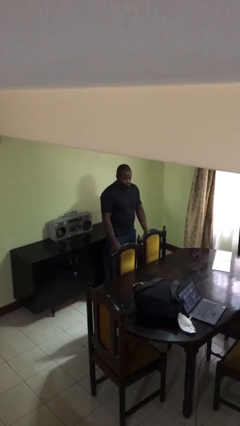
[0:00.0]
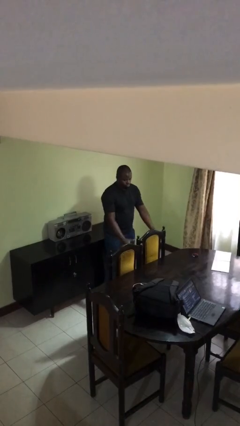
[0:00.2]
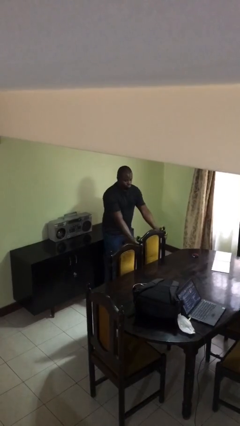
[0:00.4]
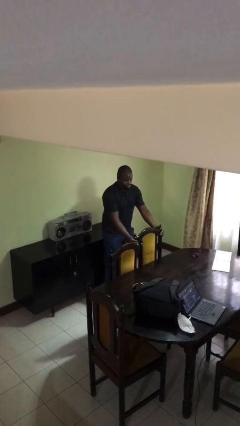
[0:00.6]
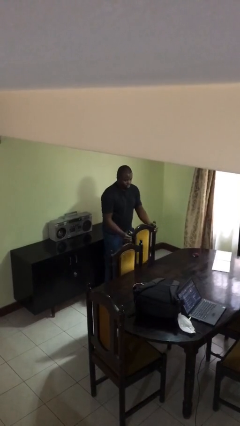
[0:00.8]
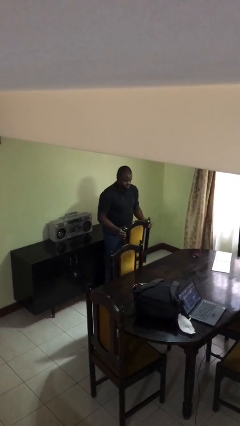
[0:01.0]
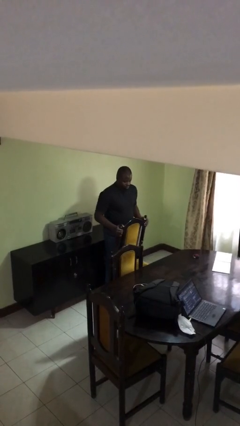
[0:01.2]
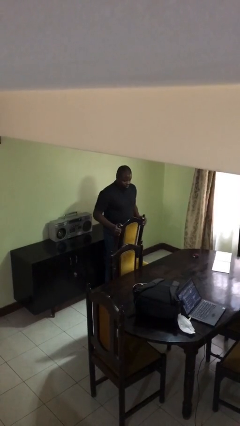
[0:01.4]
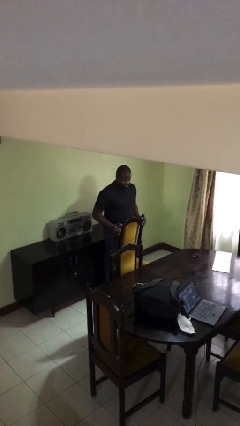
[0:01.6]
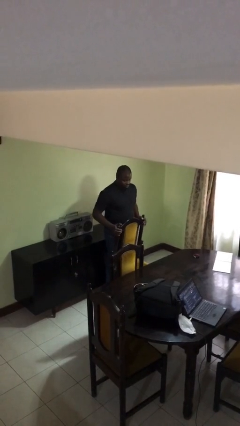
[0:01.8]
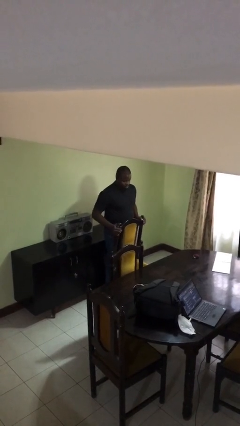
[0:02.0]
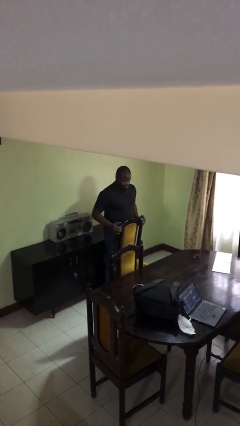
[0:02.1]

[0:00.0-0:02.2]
person pulls out chair

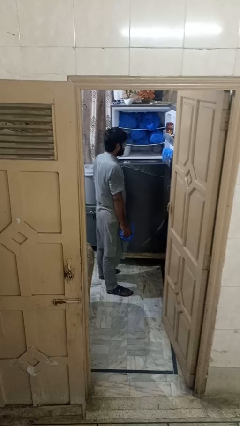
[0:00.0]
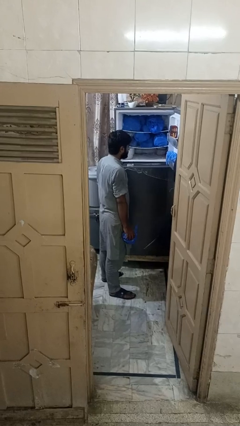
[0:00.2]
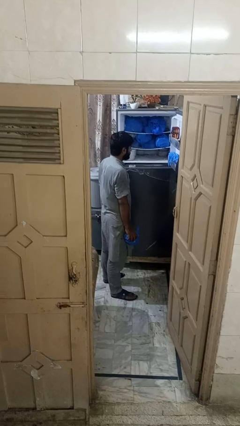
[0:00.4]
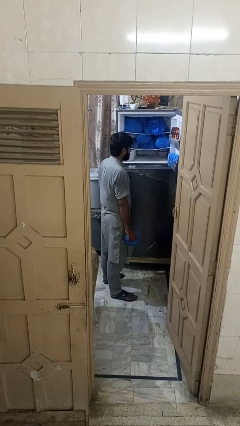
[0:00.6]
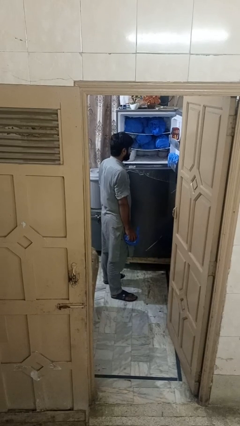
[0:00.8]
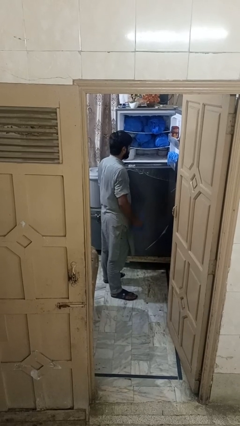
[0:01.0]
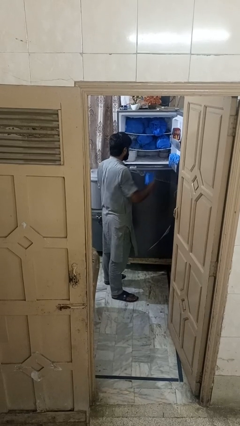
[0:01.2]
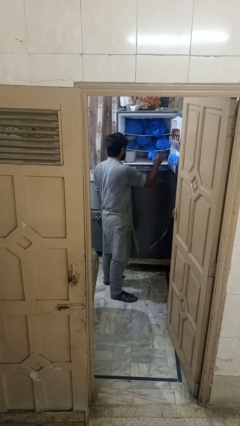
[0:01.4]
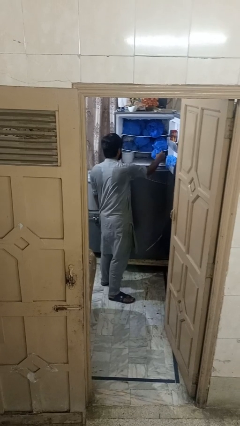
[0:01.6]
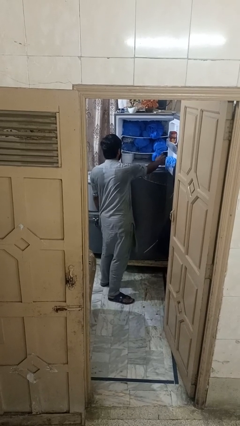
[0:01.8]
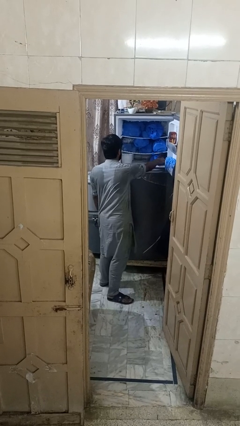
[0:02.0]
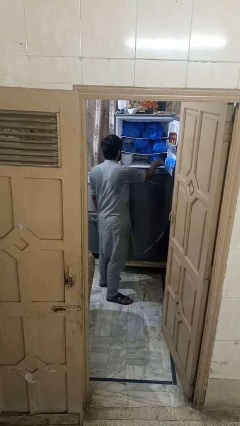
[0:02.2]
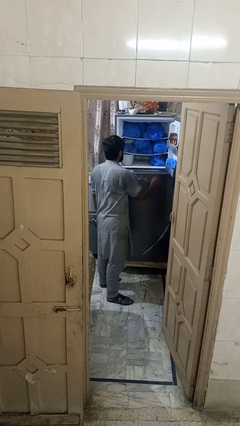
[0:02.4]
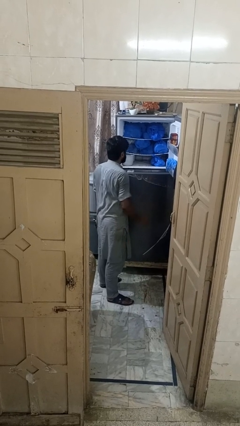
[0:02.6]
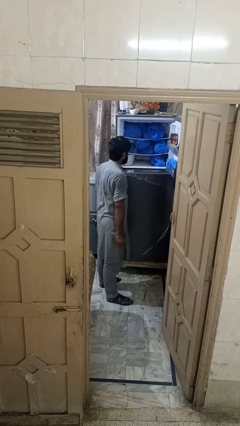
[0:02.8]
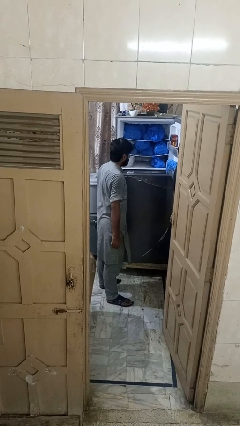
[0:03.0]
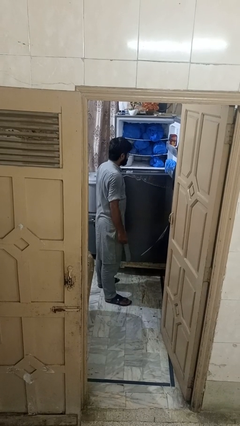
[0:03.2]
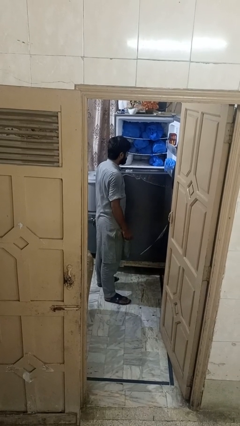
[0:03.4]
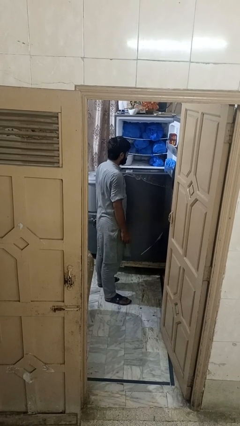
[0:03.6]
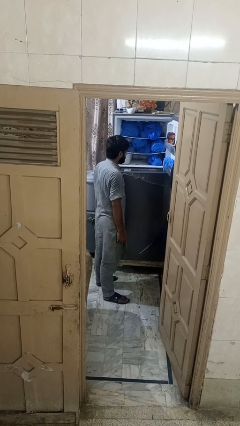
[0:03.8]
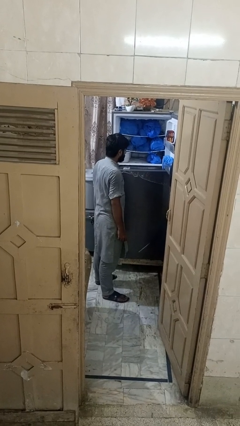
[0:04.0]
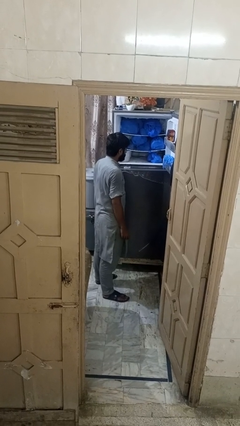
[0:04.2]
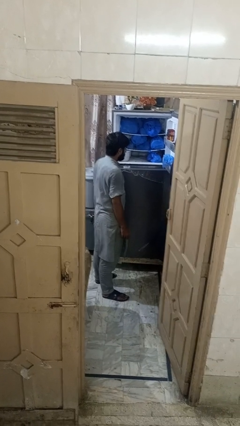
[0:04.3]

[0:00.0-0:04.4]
person loads groceries into refrigerator

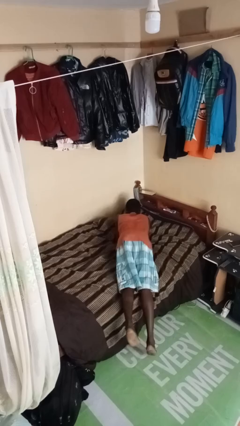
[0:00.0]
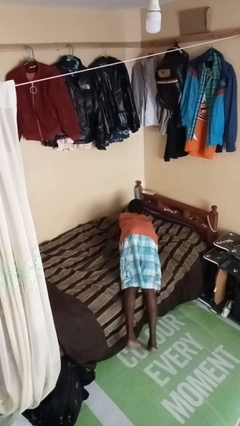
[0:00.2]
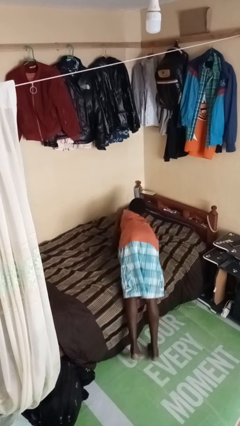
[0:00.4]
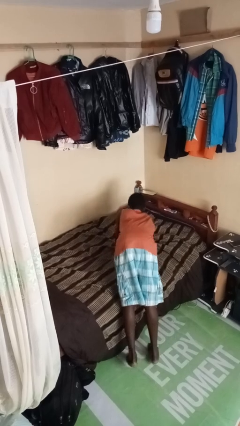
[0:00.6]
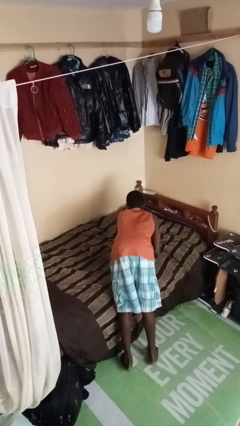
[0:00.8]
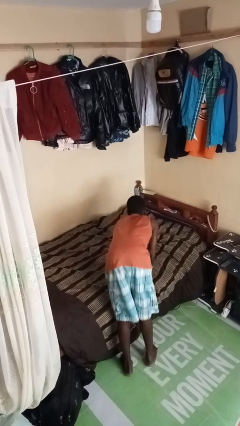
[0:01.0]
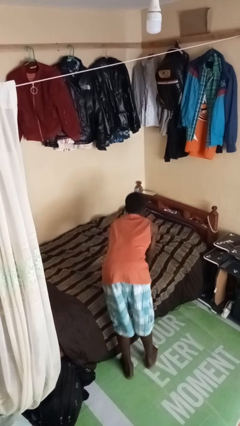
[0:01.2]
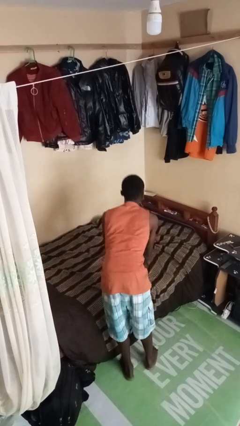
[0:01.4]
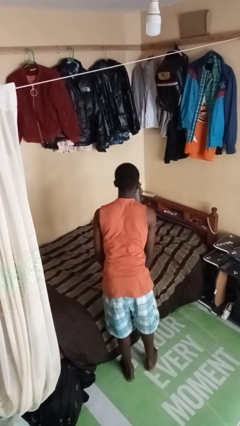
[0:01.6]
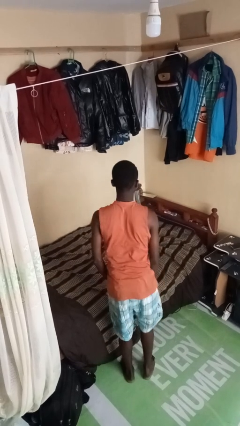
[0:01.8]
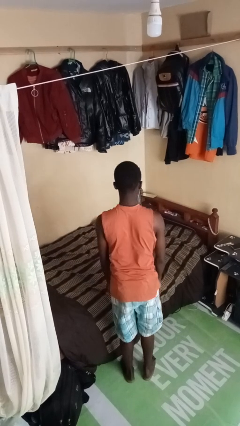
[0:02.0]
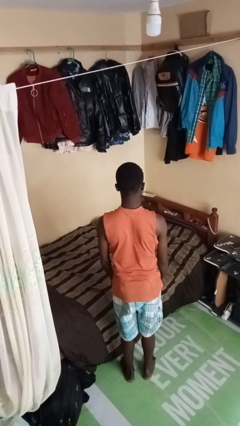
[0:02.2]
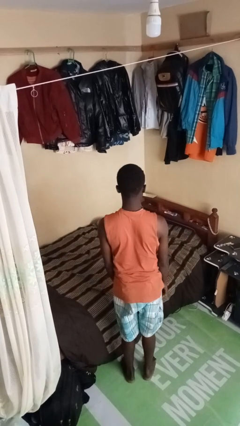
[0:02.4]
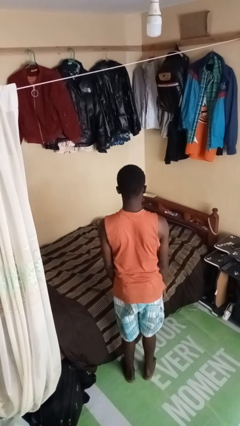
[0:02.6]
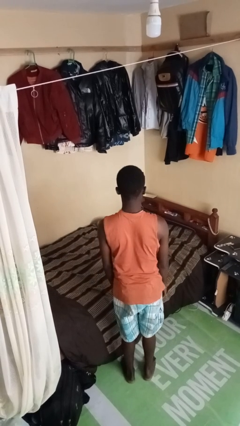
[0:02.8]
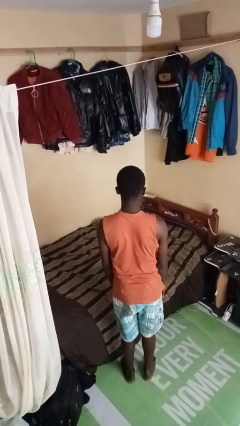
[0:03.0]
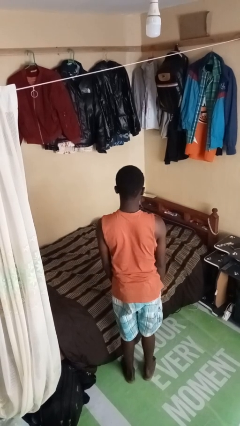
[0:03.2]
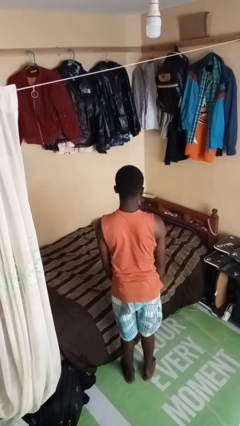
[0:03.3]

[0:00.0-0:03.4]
person stands up

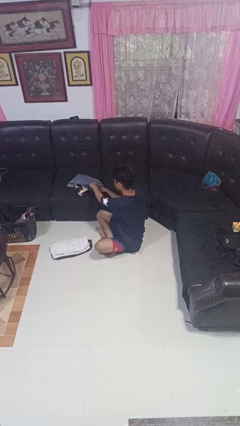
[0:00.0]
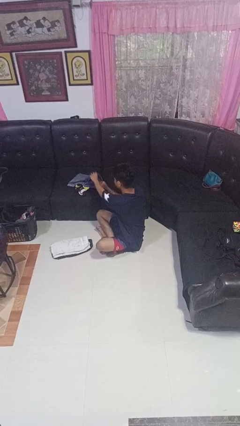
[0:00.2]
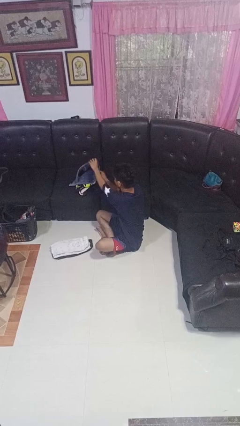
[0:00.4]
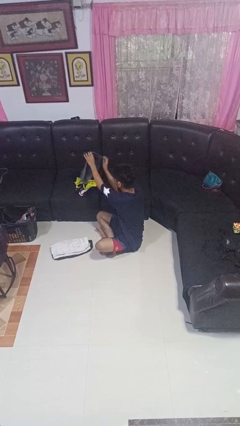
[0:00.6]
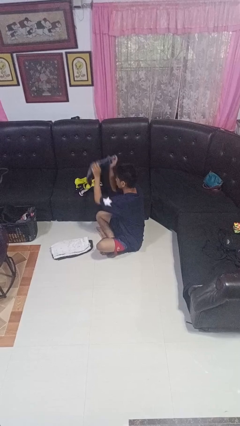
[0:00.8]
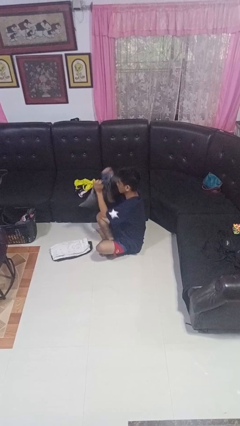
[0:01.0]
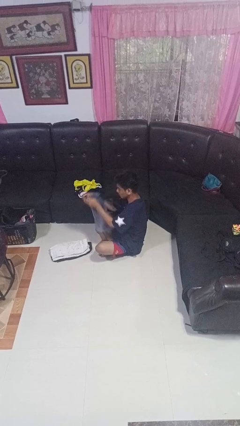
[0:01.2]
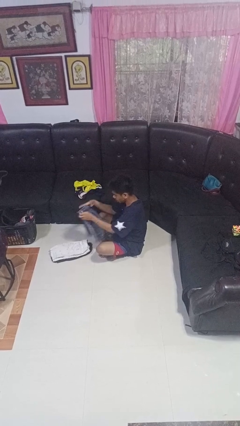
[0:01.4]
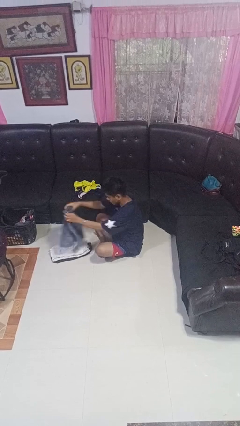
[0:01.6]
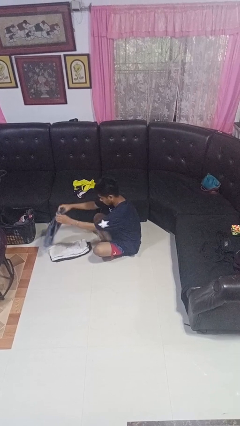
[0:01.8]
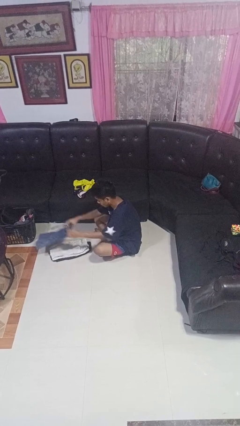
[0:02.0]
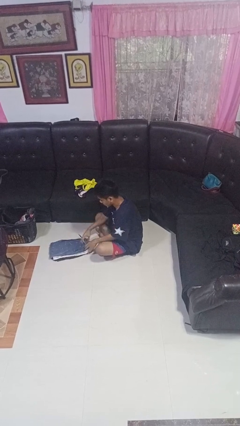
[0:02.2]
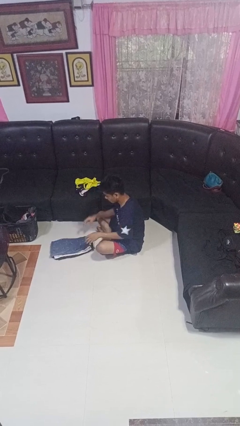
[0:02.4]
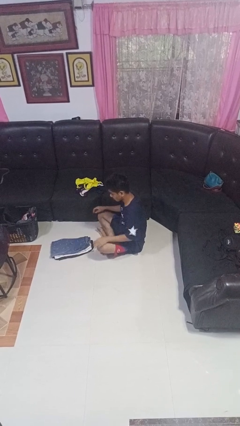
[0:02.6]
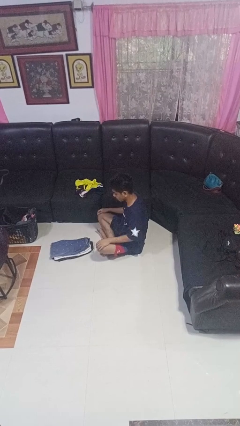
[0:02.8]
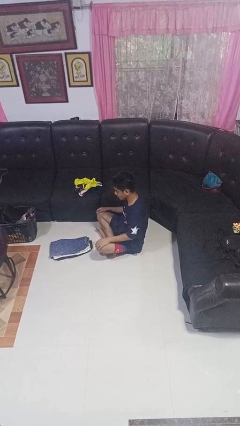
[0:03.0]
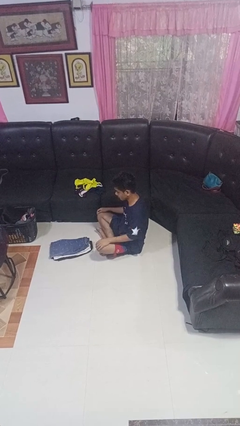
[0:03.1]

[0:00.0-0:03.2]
person folds pants

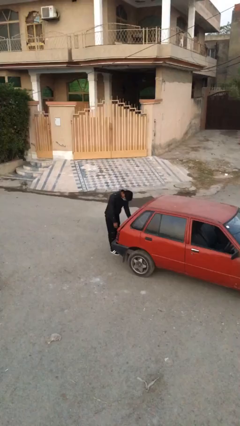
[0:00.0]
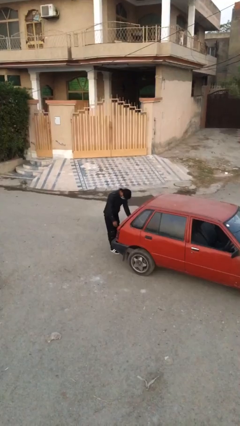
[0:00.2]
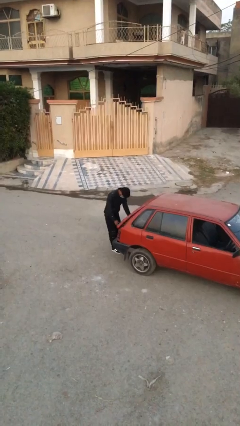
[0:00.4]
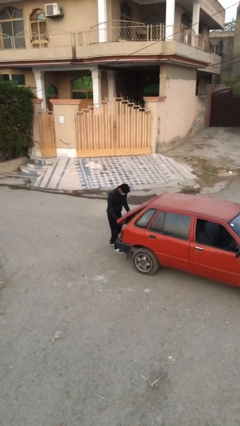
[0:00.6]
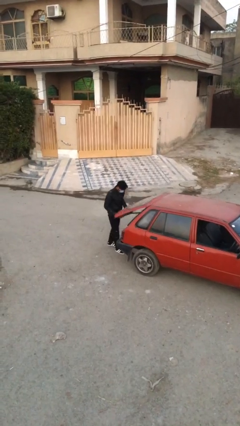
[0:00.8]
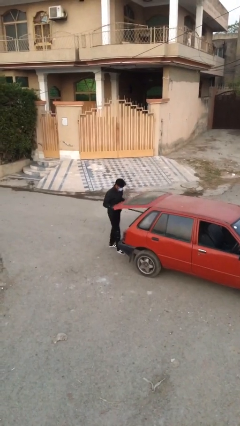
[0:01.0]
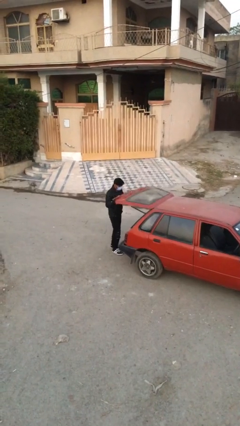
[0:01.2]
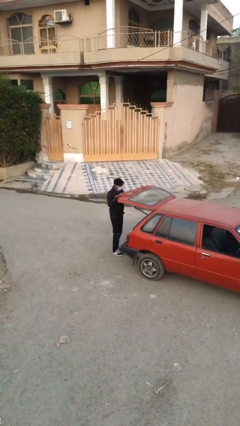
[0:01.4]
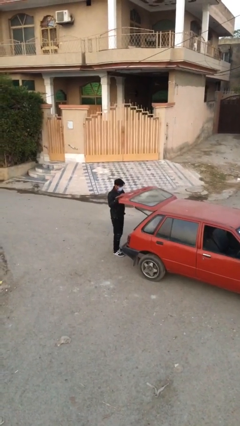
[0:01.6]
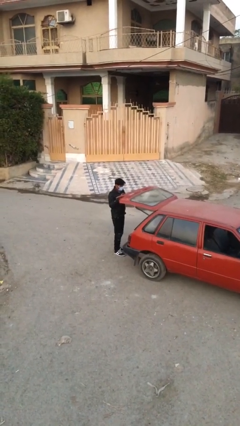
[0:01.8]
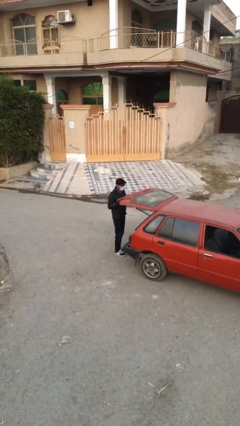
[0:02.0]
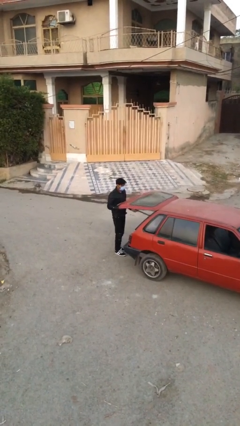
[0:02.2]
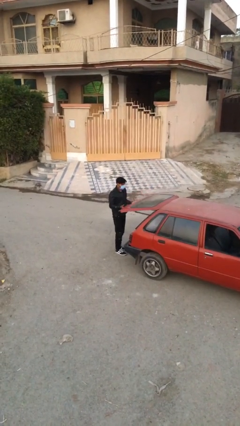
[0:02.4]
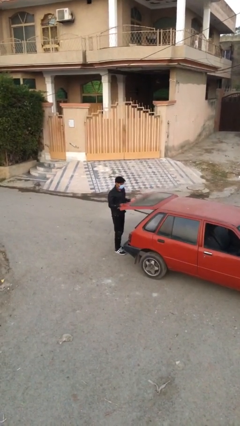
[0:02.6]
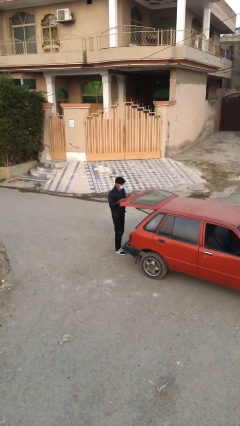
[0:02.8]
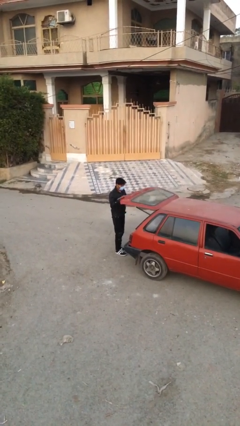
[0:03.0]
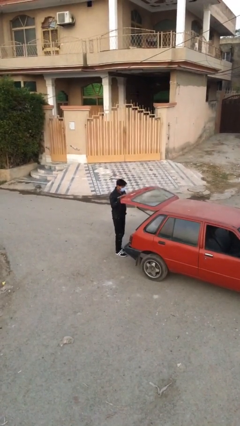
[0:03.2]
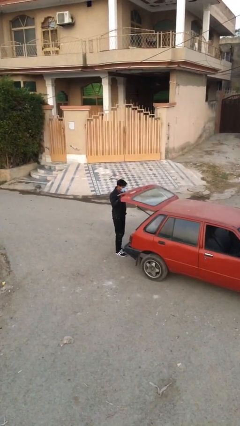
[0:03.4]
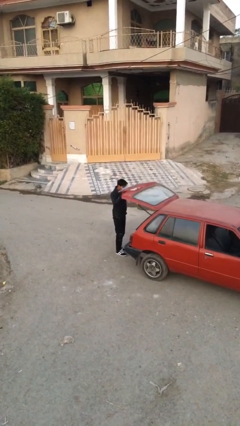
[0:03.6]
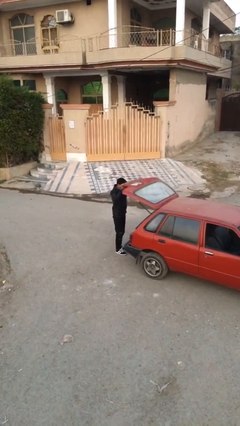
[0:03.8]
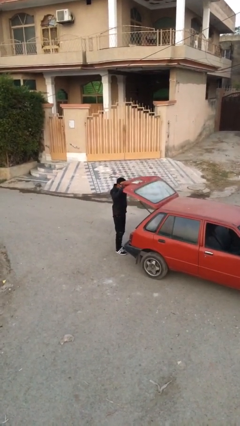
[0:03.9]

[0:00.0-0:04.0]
person opens car trunk

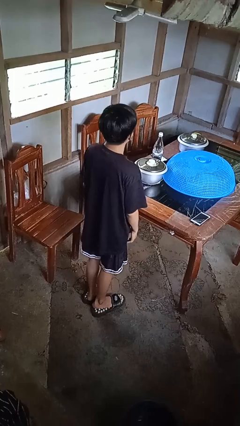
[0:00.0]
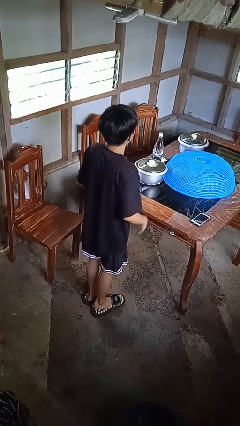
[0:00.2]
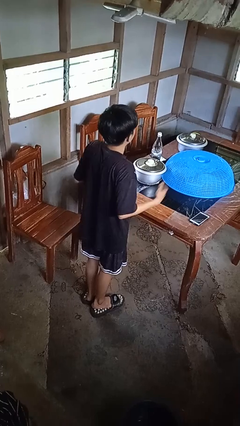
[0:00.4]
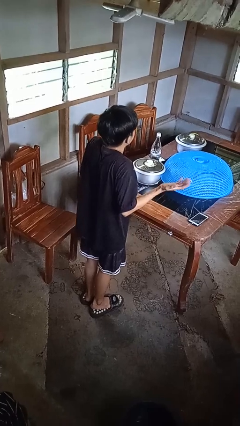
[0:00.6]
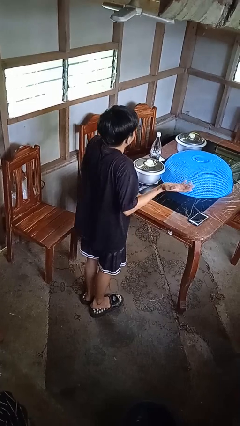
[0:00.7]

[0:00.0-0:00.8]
person shrugs
